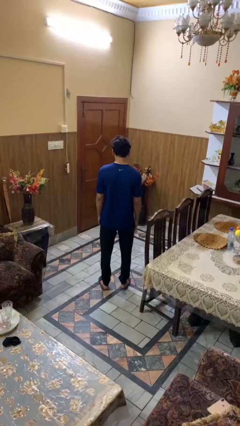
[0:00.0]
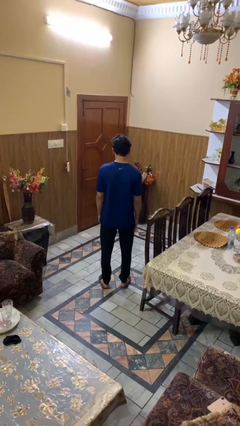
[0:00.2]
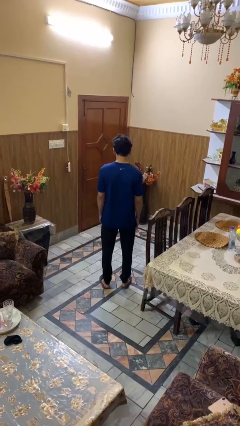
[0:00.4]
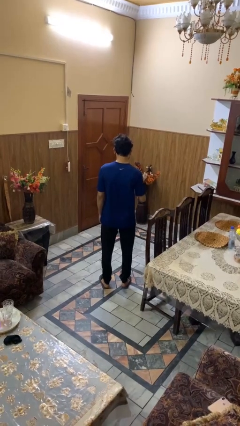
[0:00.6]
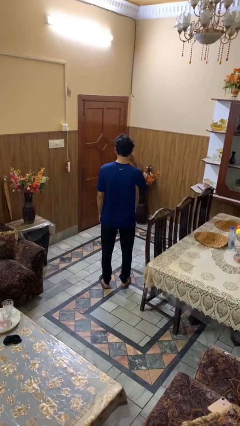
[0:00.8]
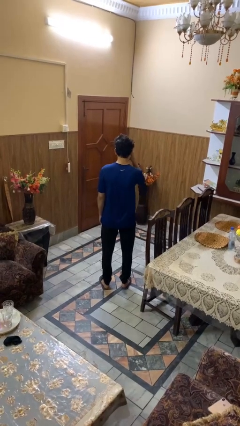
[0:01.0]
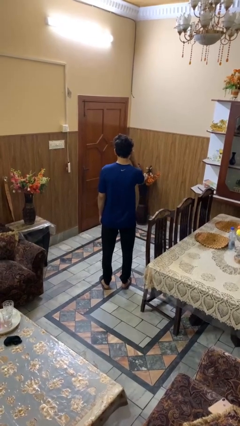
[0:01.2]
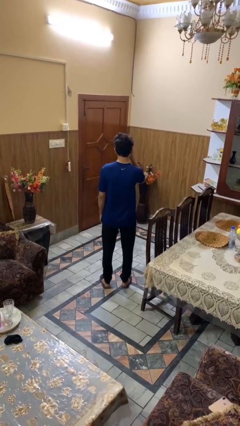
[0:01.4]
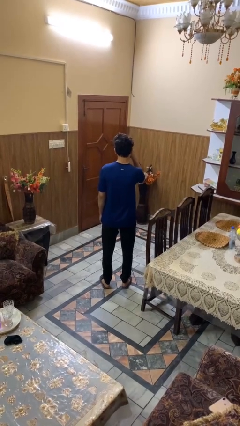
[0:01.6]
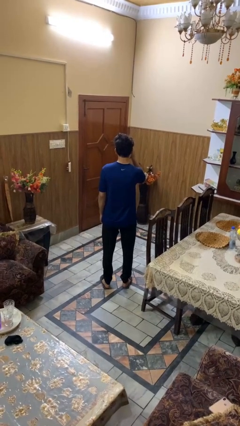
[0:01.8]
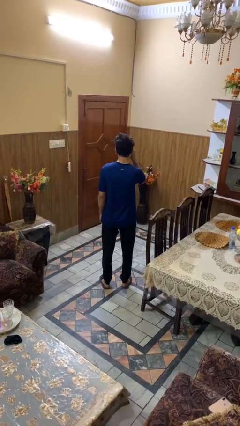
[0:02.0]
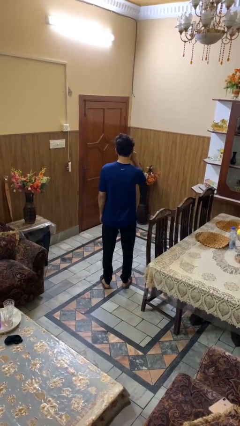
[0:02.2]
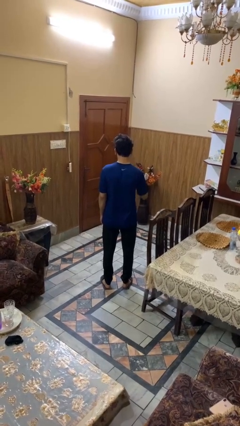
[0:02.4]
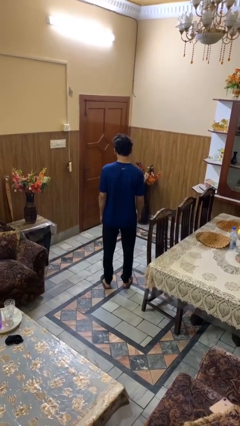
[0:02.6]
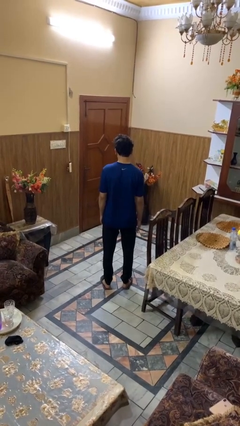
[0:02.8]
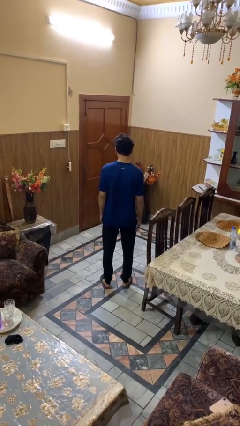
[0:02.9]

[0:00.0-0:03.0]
person rubs eyes

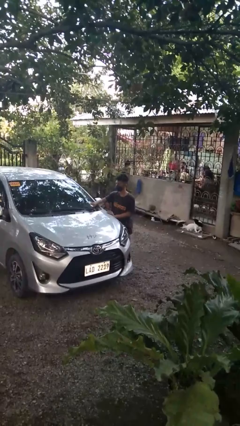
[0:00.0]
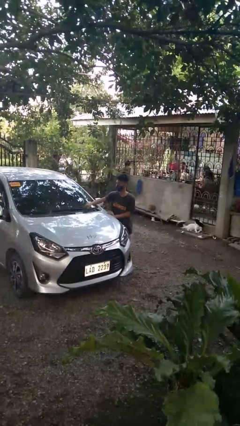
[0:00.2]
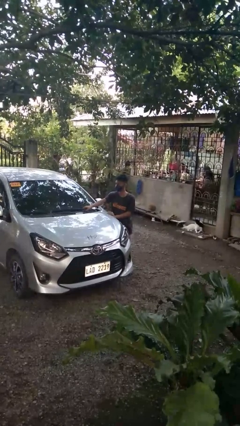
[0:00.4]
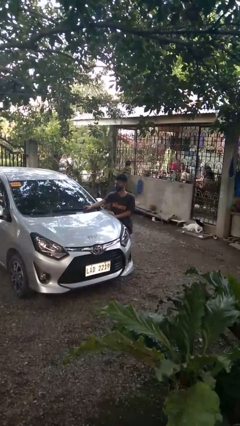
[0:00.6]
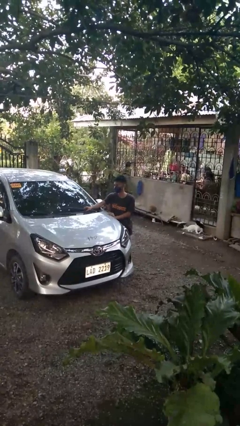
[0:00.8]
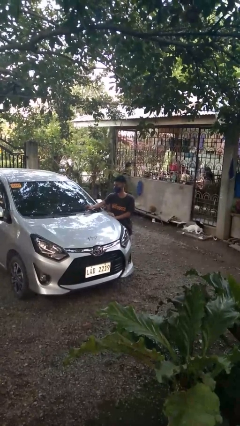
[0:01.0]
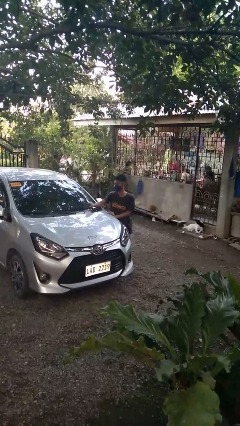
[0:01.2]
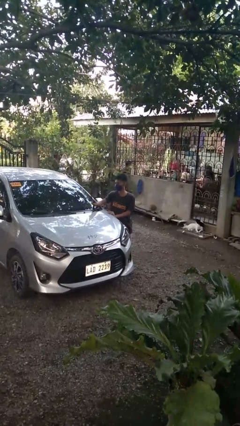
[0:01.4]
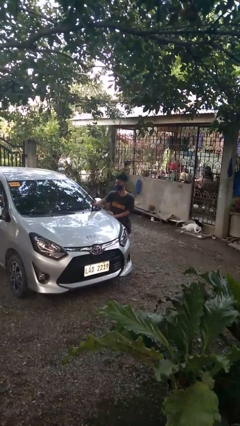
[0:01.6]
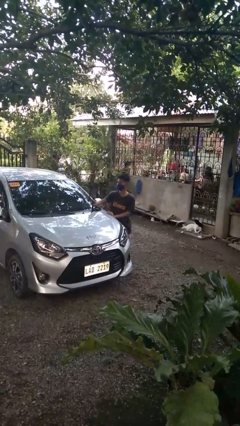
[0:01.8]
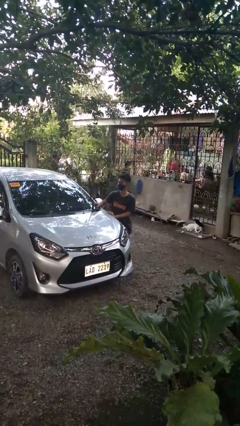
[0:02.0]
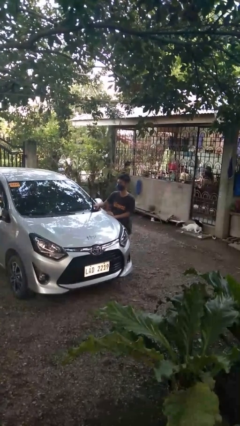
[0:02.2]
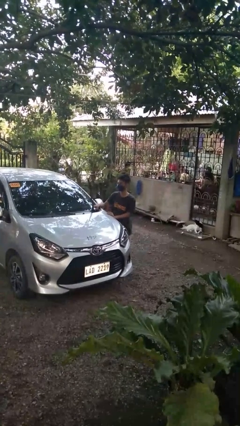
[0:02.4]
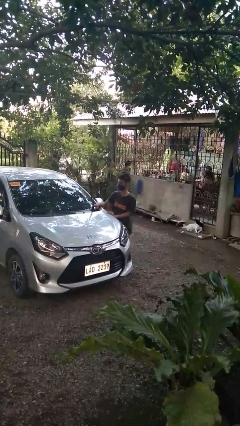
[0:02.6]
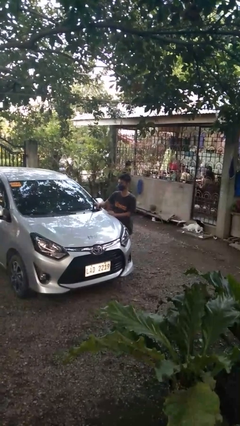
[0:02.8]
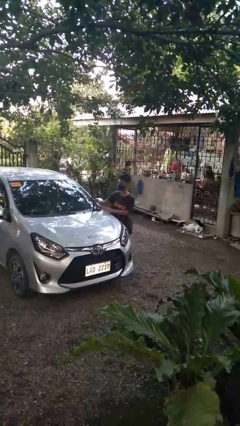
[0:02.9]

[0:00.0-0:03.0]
person flips up car wipers

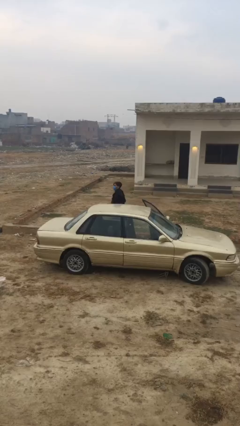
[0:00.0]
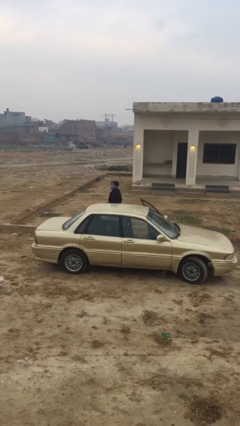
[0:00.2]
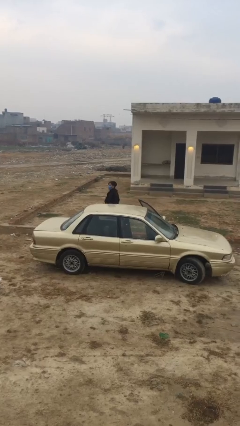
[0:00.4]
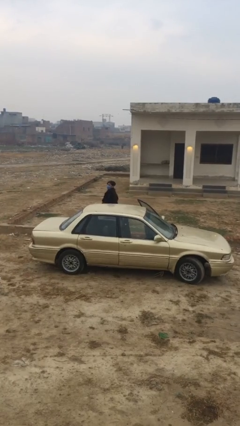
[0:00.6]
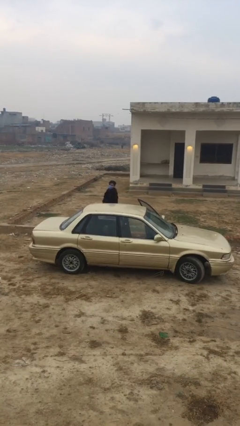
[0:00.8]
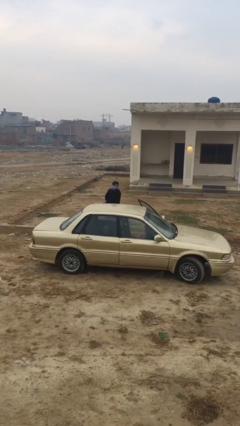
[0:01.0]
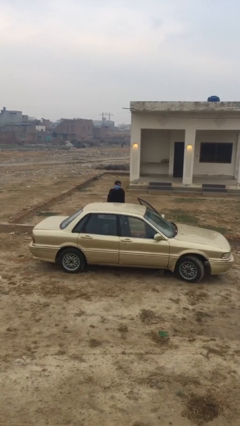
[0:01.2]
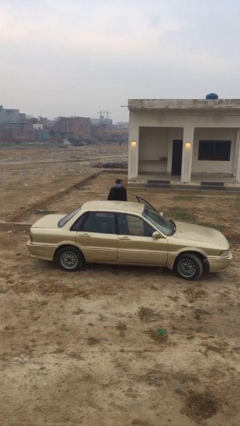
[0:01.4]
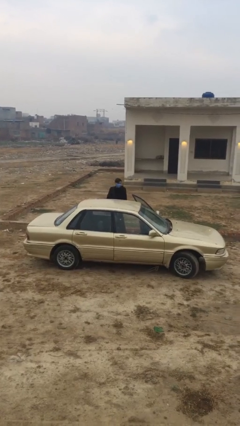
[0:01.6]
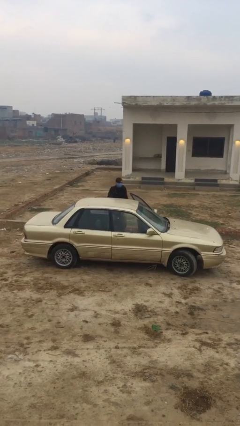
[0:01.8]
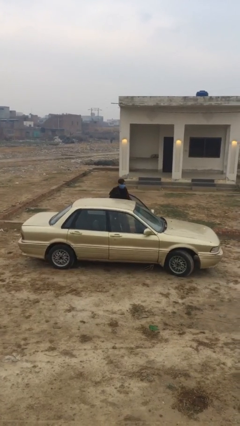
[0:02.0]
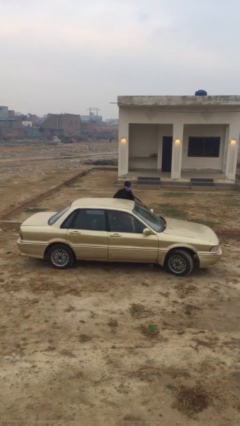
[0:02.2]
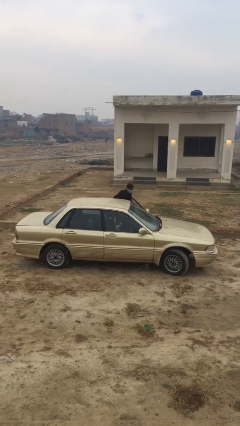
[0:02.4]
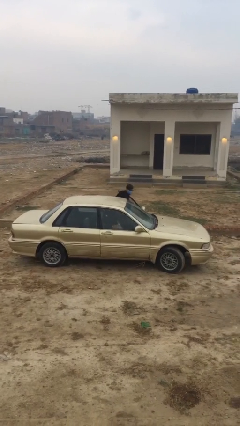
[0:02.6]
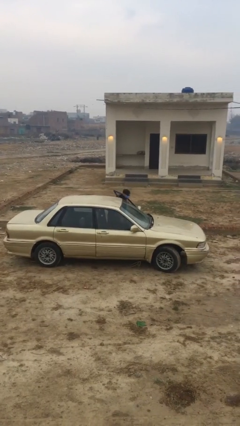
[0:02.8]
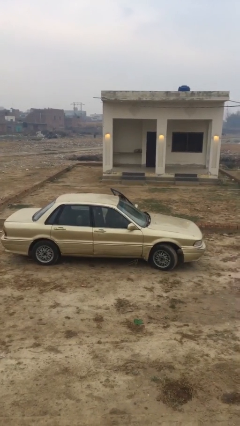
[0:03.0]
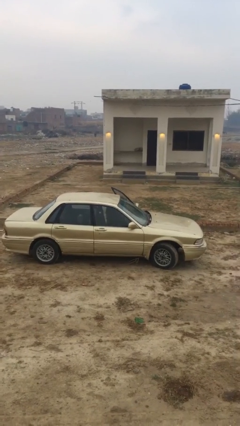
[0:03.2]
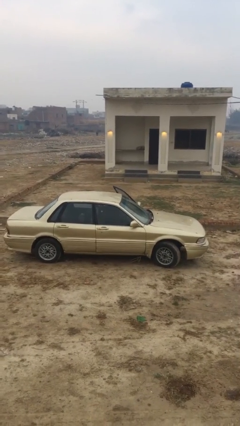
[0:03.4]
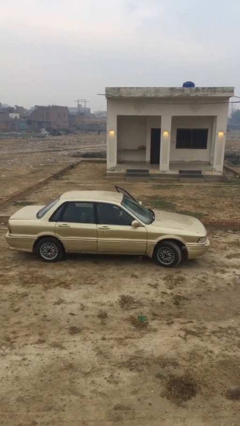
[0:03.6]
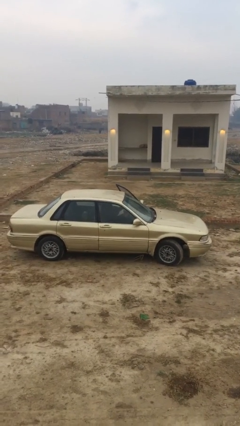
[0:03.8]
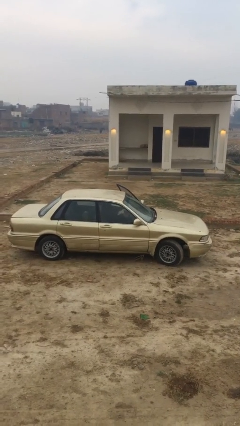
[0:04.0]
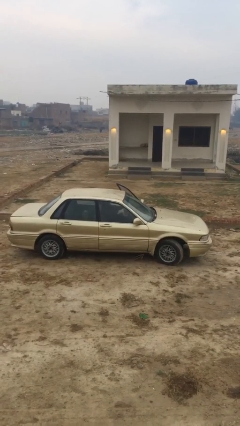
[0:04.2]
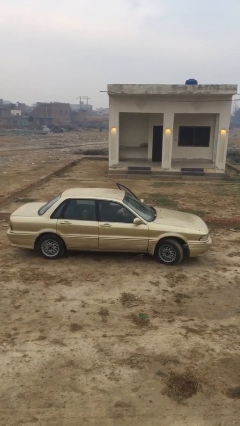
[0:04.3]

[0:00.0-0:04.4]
person enters car

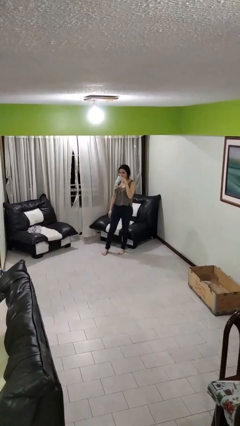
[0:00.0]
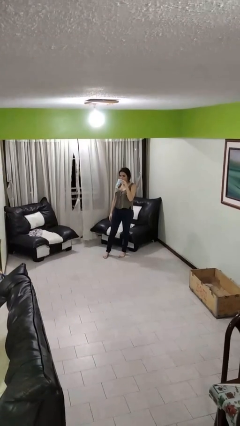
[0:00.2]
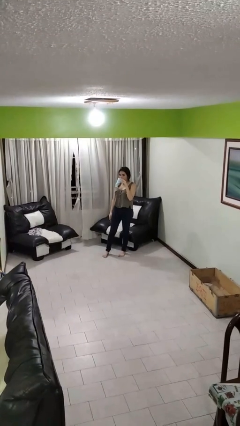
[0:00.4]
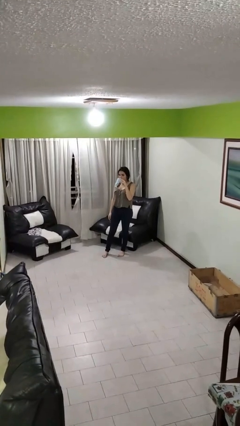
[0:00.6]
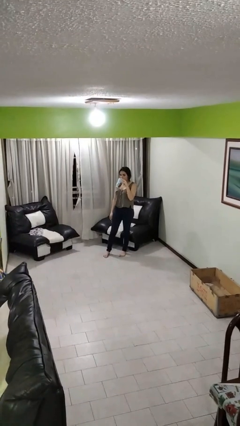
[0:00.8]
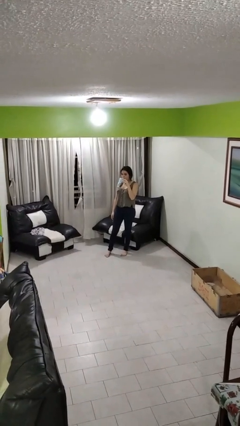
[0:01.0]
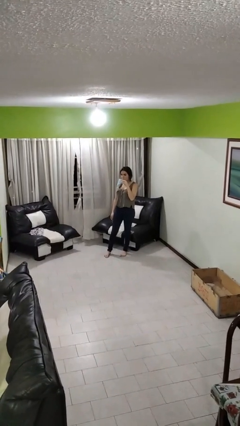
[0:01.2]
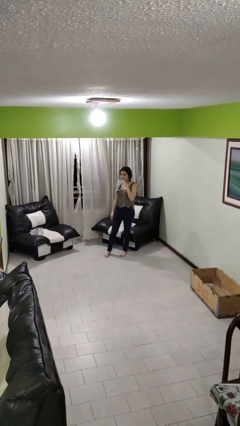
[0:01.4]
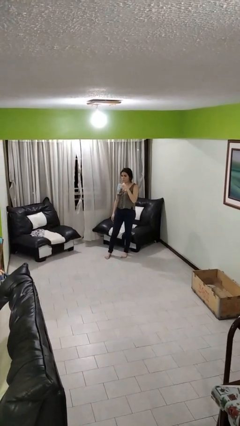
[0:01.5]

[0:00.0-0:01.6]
person drinks from straw

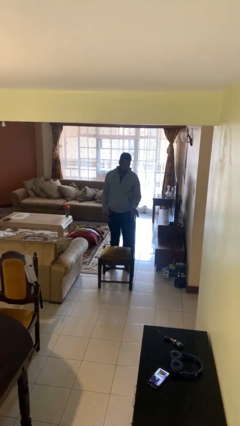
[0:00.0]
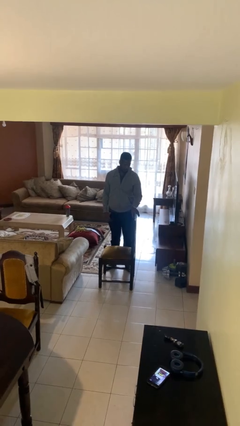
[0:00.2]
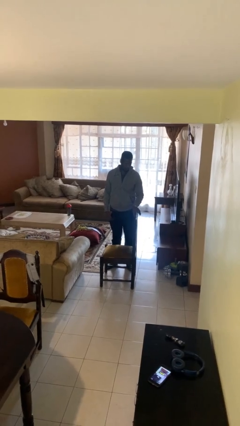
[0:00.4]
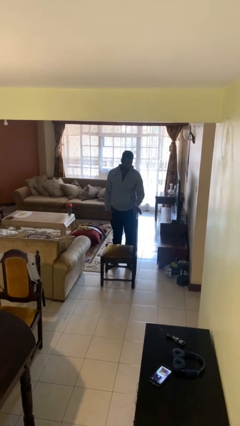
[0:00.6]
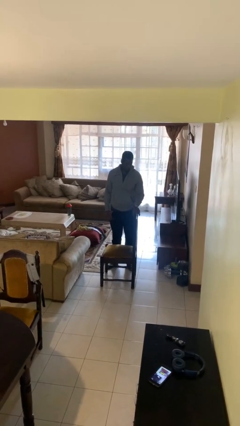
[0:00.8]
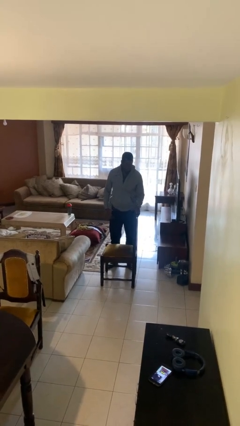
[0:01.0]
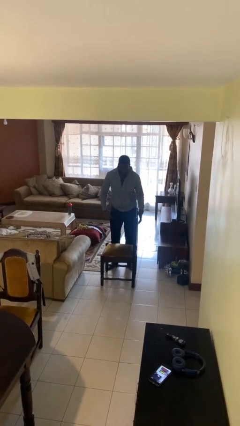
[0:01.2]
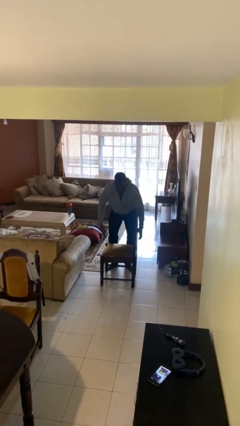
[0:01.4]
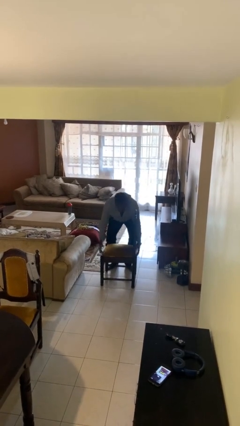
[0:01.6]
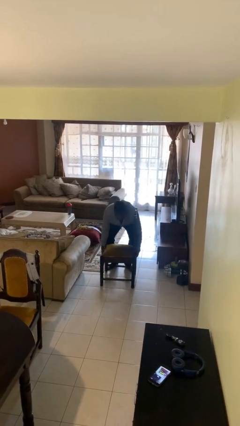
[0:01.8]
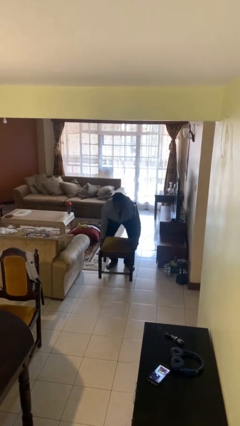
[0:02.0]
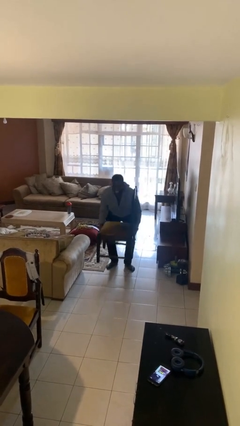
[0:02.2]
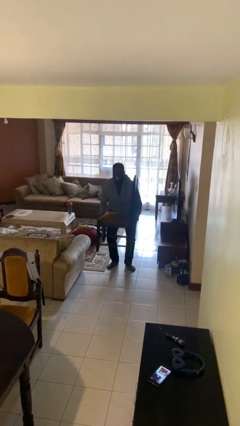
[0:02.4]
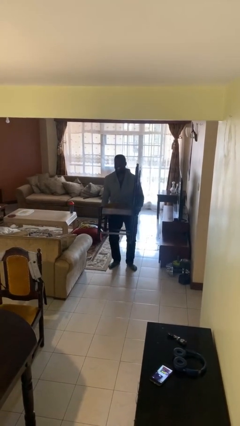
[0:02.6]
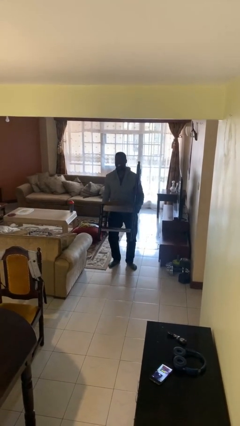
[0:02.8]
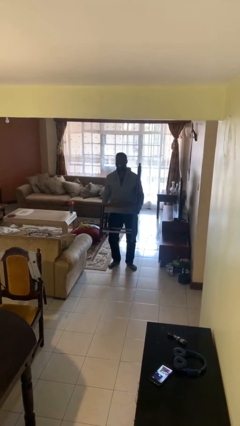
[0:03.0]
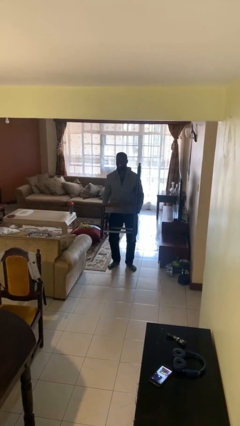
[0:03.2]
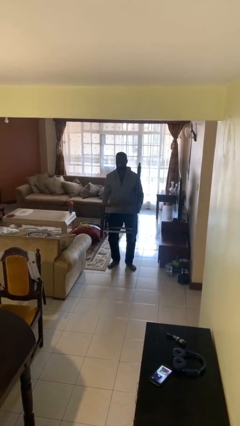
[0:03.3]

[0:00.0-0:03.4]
person picks up object from floor

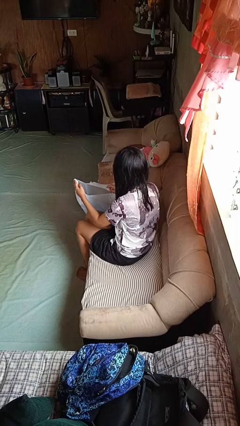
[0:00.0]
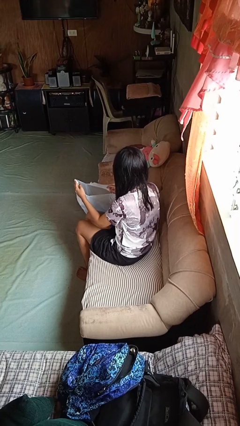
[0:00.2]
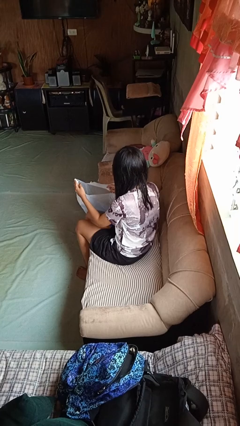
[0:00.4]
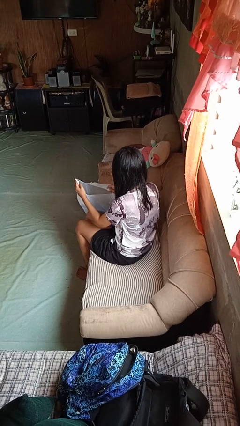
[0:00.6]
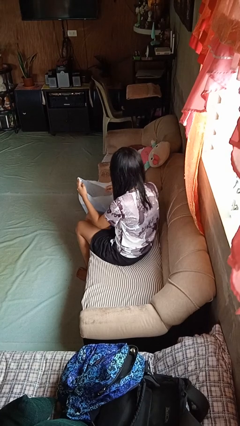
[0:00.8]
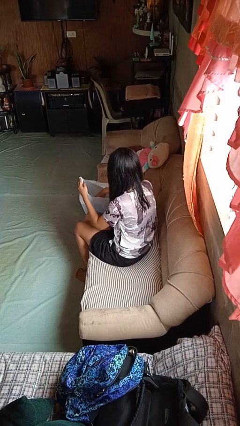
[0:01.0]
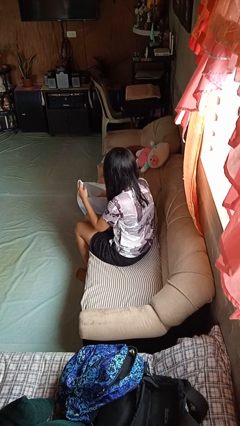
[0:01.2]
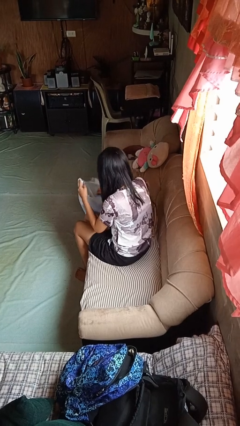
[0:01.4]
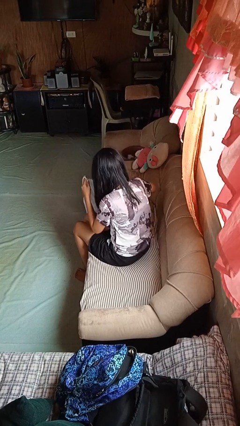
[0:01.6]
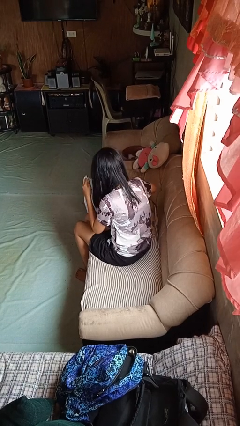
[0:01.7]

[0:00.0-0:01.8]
person searches in bag
